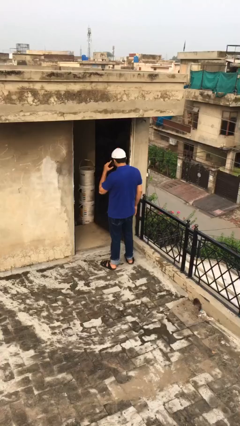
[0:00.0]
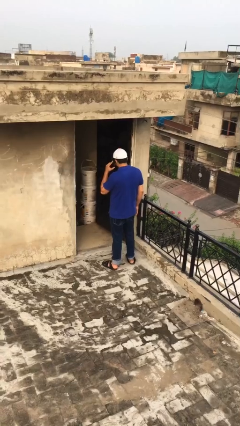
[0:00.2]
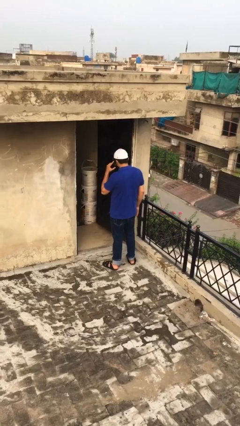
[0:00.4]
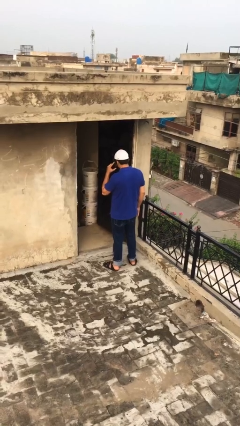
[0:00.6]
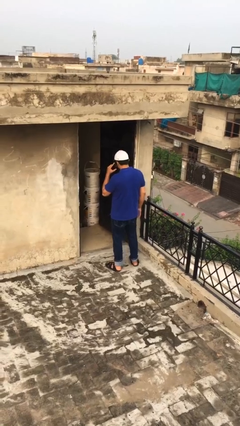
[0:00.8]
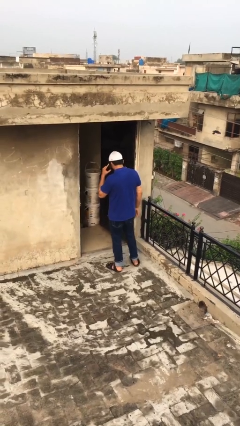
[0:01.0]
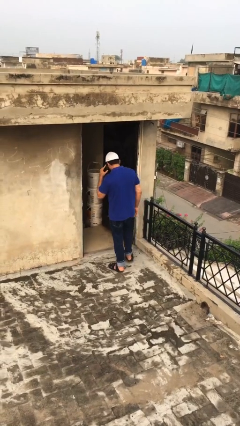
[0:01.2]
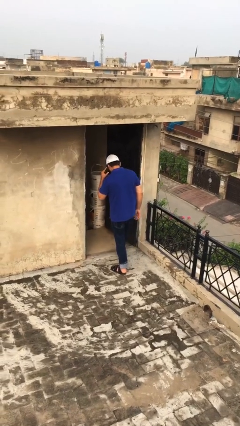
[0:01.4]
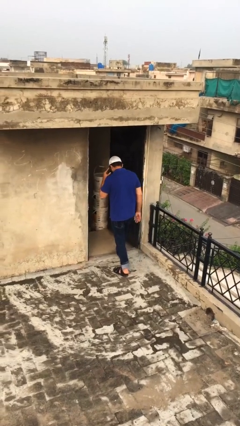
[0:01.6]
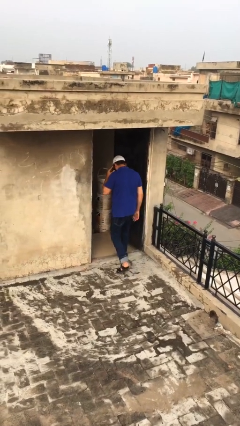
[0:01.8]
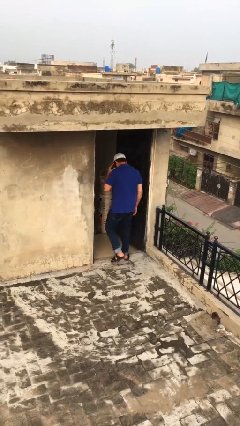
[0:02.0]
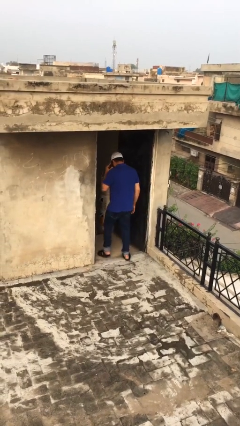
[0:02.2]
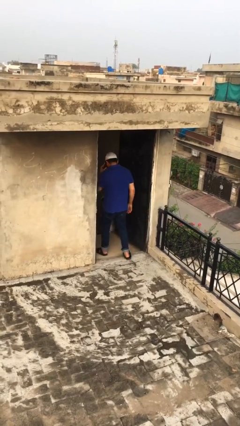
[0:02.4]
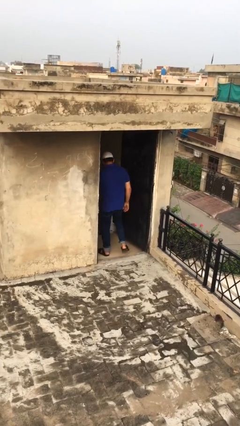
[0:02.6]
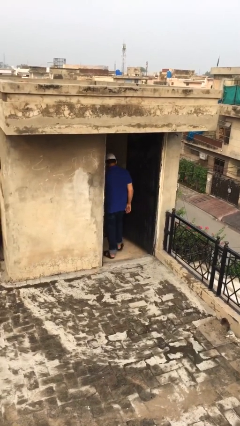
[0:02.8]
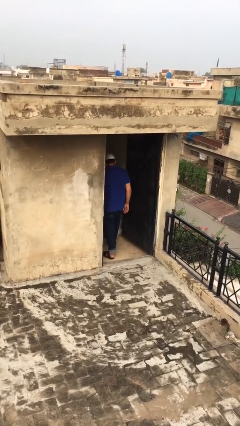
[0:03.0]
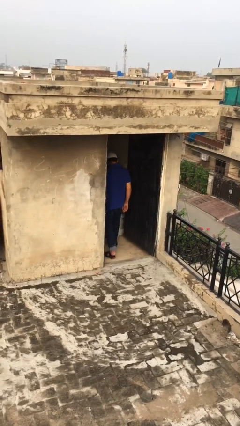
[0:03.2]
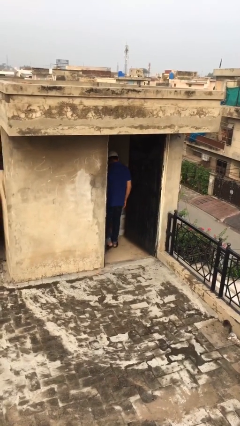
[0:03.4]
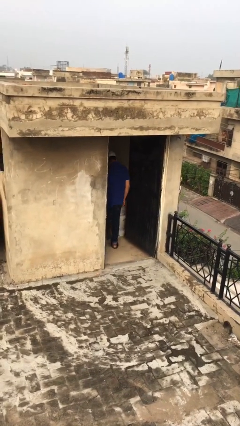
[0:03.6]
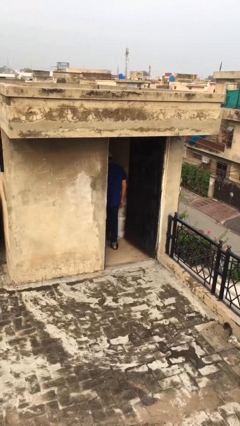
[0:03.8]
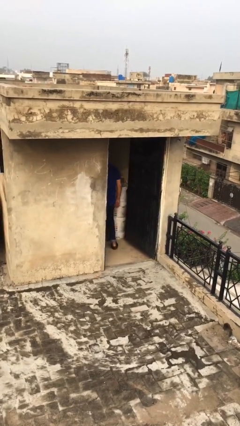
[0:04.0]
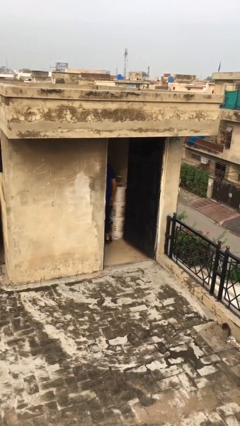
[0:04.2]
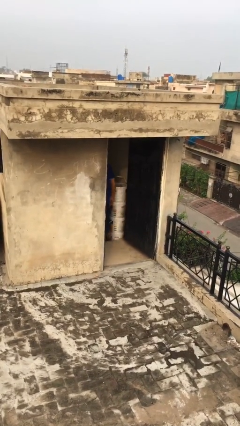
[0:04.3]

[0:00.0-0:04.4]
person exits scene through structure

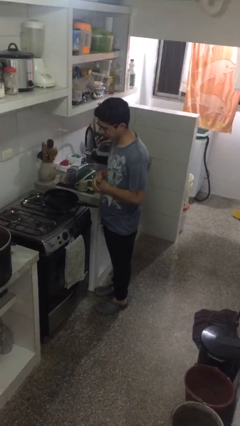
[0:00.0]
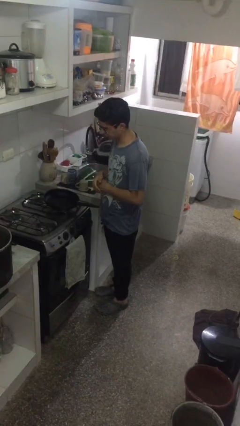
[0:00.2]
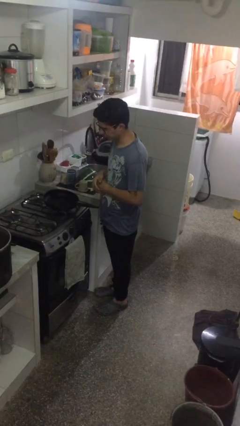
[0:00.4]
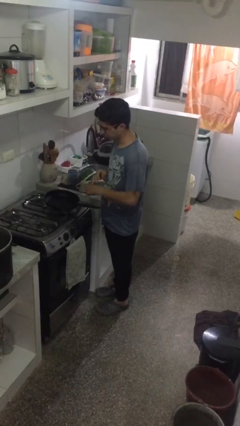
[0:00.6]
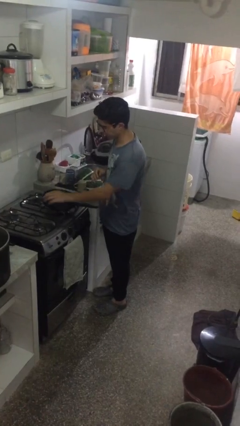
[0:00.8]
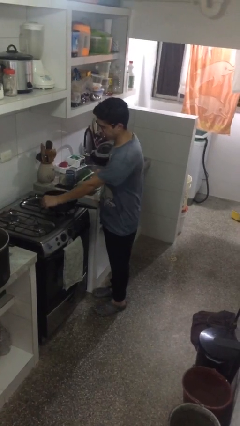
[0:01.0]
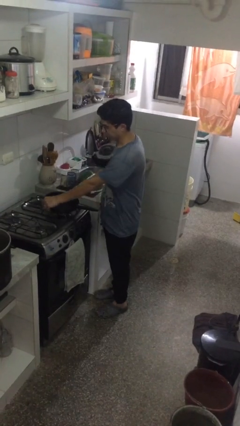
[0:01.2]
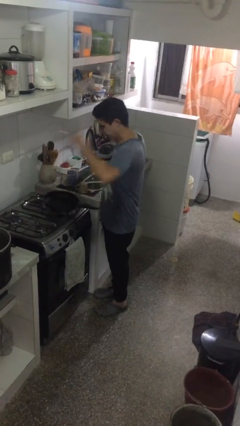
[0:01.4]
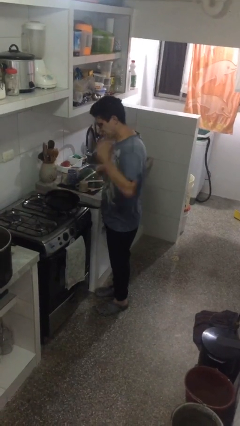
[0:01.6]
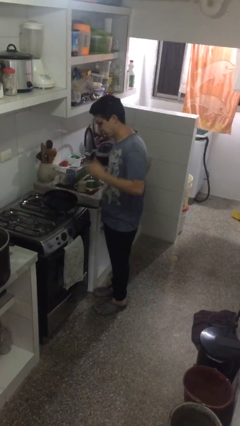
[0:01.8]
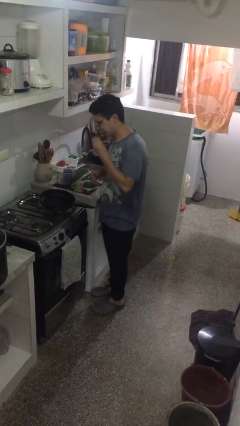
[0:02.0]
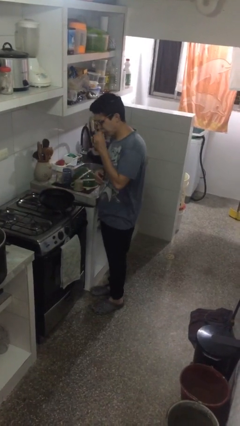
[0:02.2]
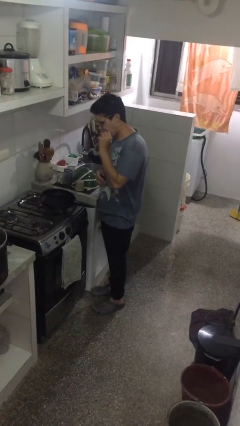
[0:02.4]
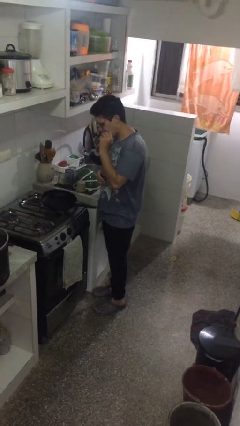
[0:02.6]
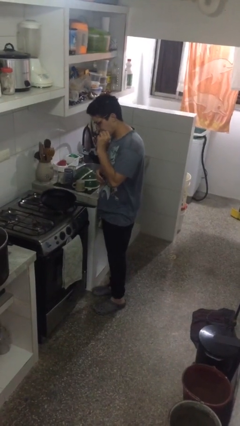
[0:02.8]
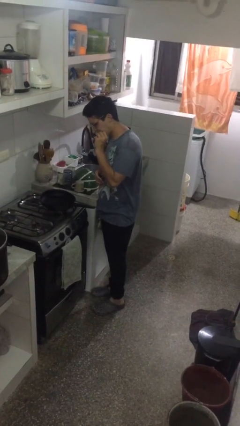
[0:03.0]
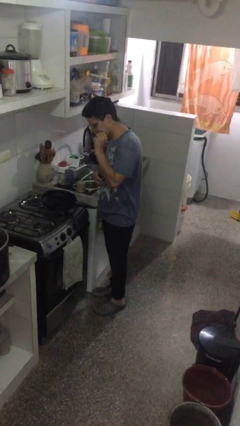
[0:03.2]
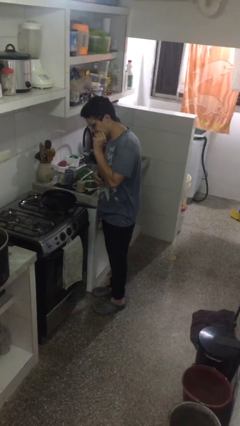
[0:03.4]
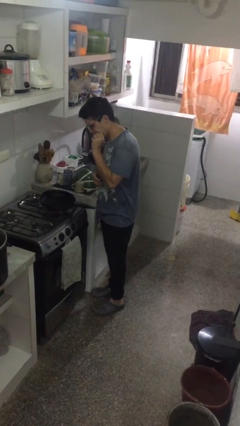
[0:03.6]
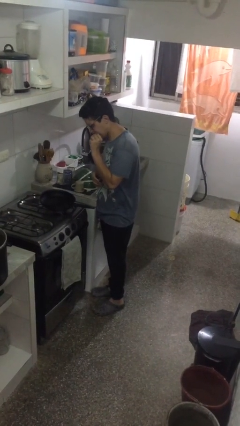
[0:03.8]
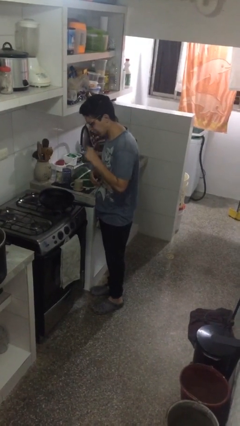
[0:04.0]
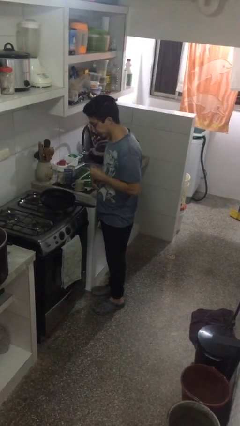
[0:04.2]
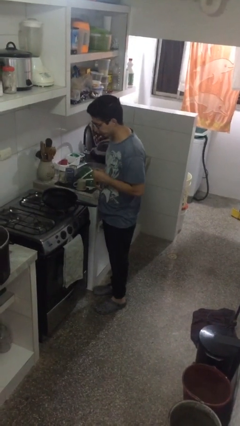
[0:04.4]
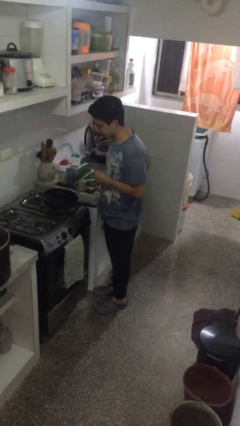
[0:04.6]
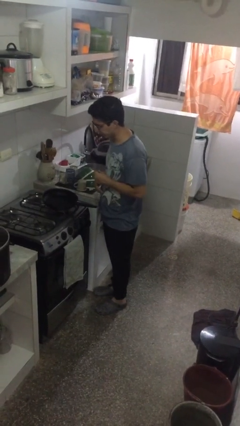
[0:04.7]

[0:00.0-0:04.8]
person burns hand

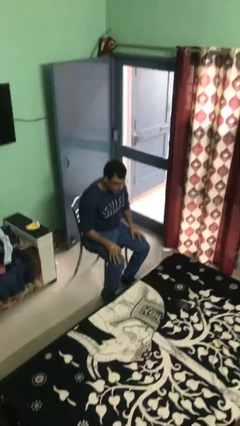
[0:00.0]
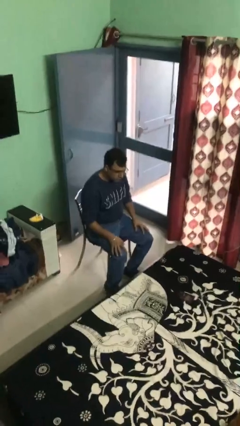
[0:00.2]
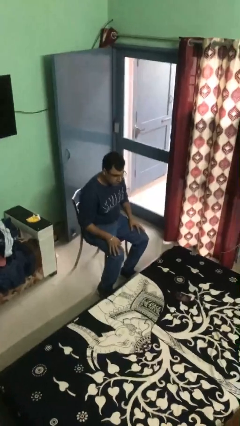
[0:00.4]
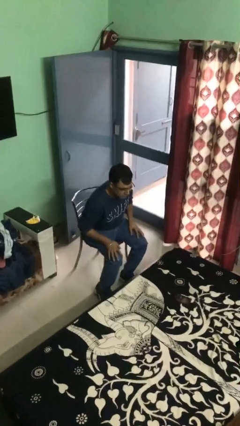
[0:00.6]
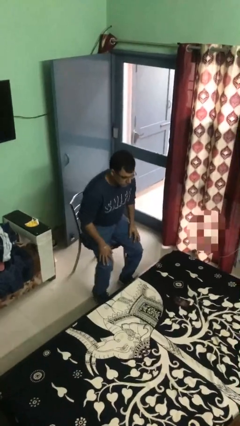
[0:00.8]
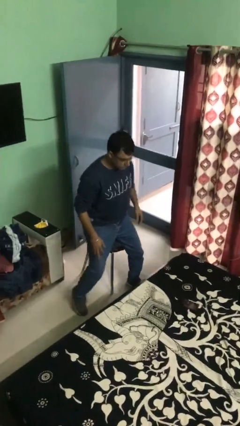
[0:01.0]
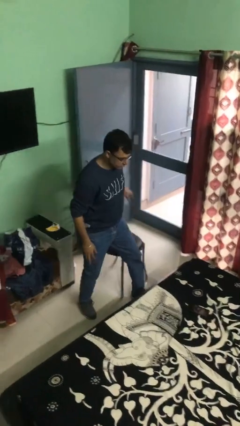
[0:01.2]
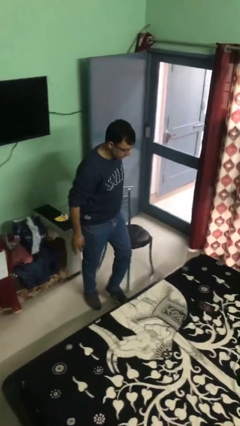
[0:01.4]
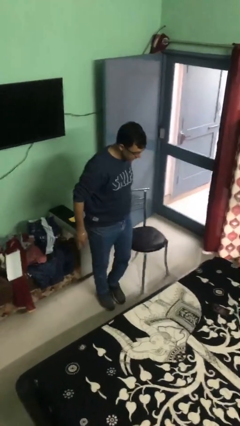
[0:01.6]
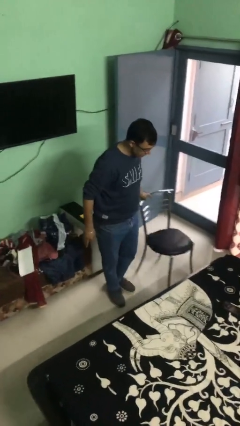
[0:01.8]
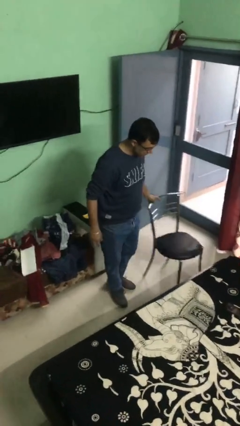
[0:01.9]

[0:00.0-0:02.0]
person stands up

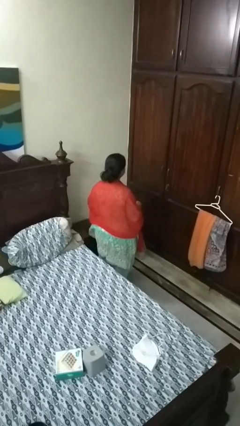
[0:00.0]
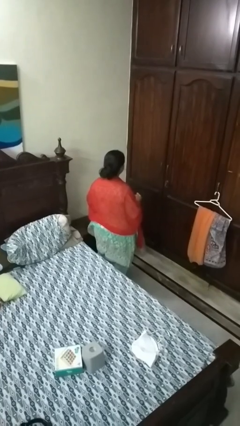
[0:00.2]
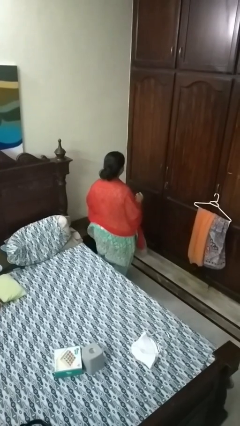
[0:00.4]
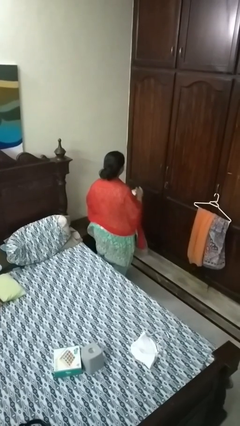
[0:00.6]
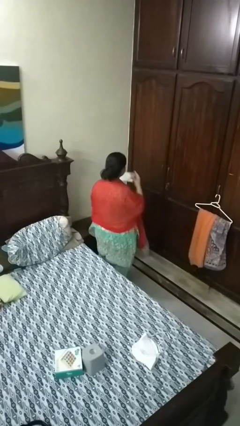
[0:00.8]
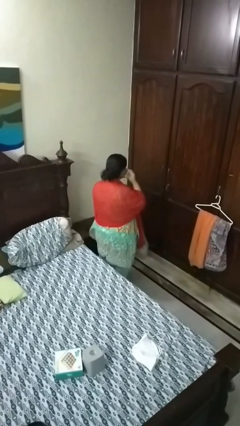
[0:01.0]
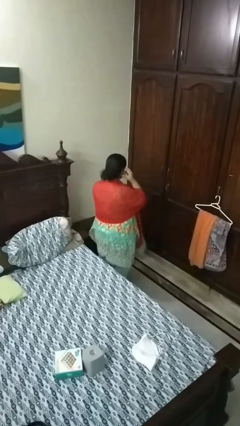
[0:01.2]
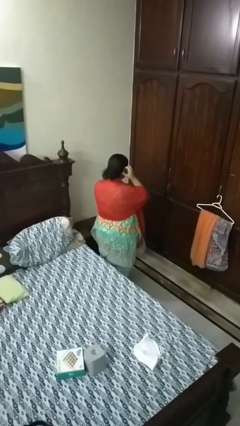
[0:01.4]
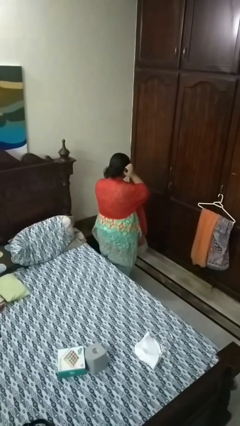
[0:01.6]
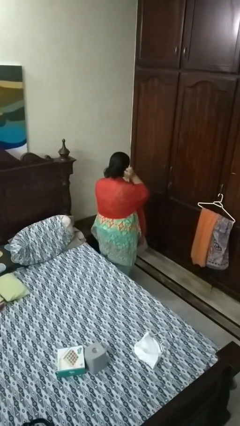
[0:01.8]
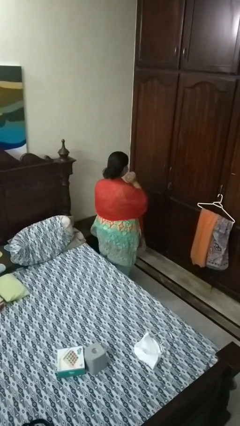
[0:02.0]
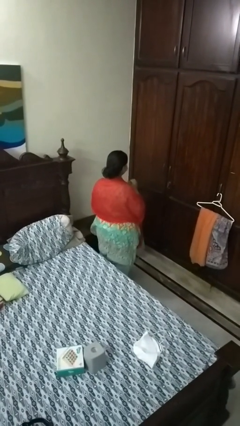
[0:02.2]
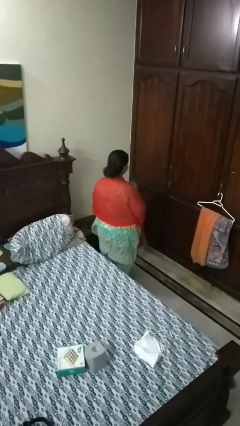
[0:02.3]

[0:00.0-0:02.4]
person puts on facemask

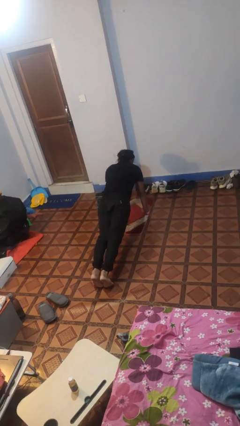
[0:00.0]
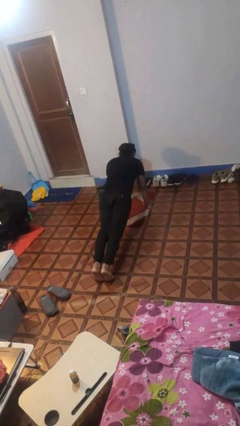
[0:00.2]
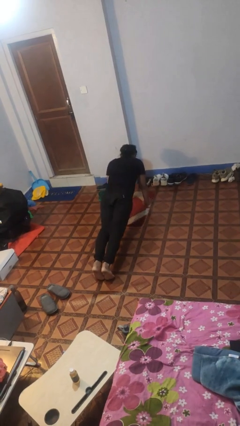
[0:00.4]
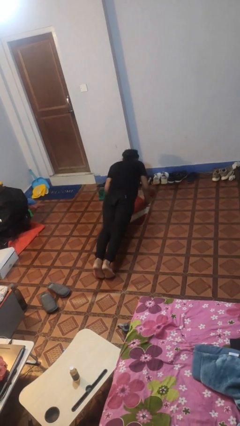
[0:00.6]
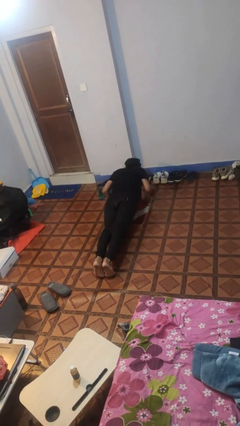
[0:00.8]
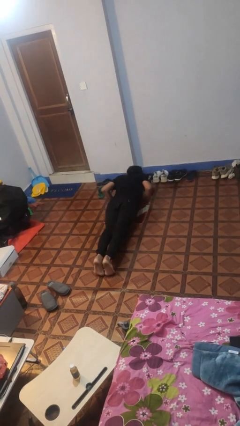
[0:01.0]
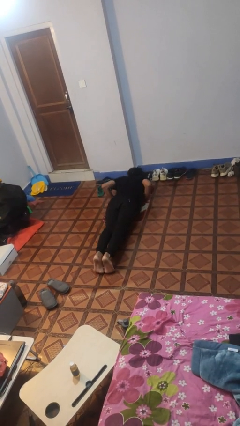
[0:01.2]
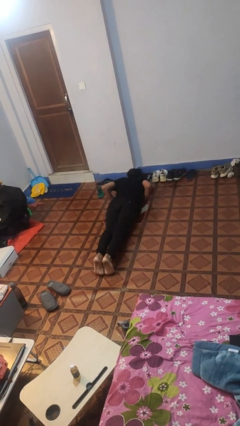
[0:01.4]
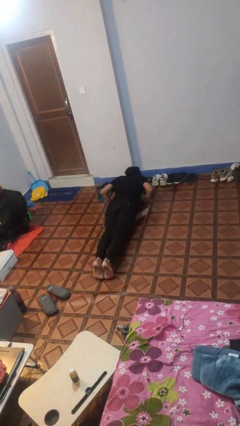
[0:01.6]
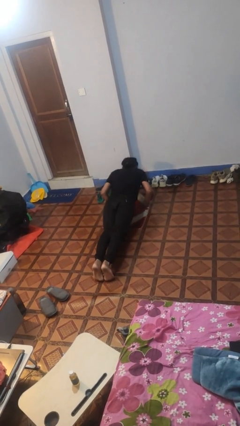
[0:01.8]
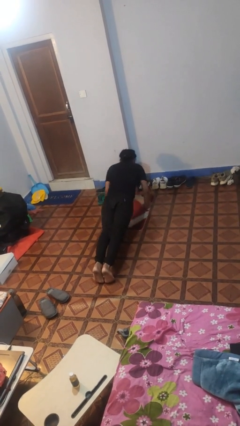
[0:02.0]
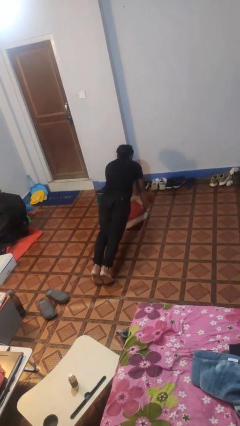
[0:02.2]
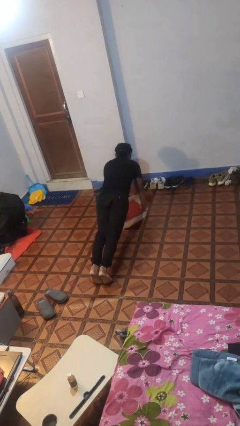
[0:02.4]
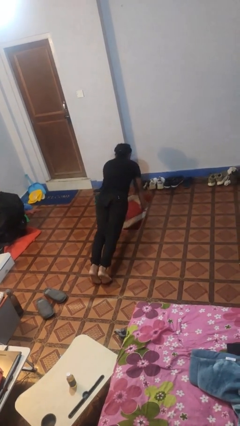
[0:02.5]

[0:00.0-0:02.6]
person exercises with pushup

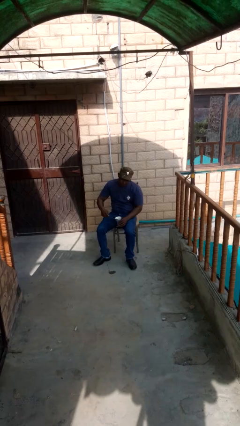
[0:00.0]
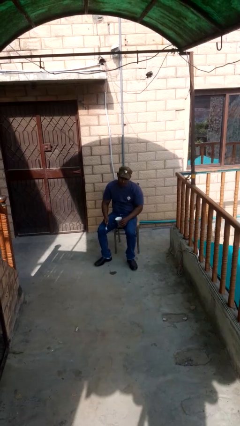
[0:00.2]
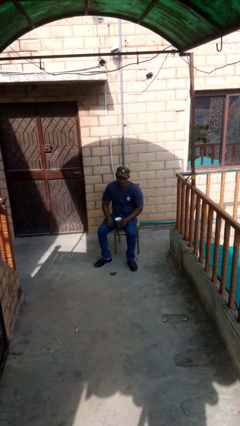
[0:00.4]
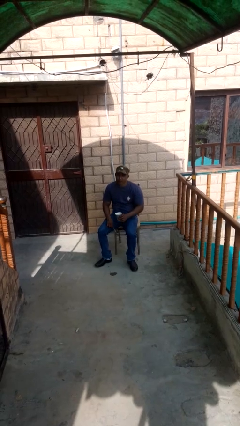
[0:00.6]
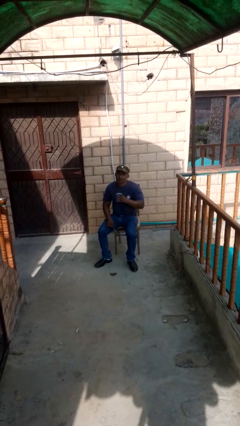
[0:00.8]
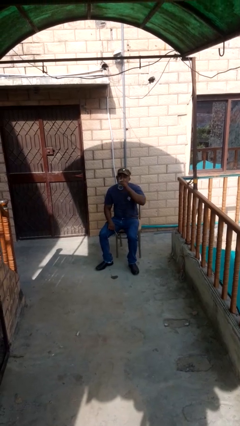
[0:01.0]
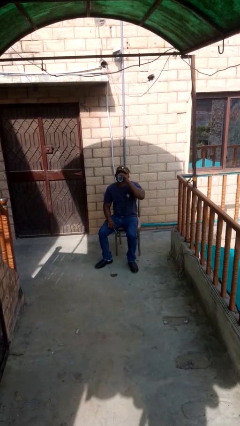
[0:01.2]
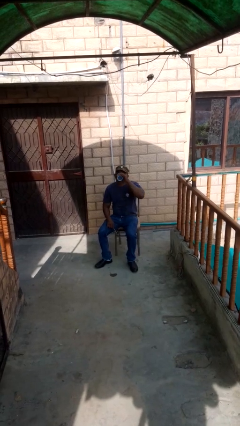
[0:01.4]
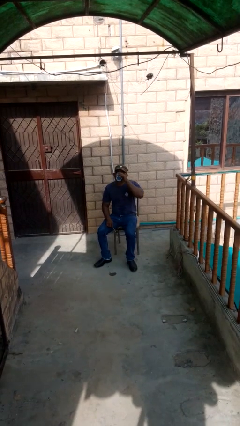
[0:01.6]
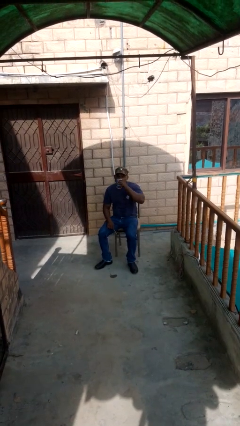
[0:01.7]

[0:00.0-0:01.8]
person drinks from mug
